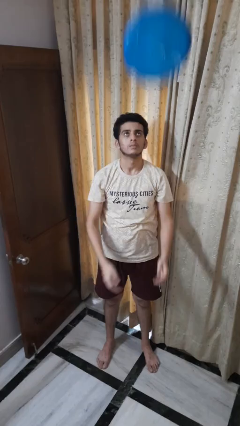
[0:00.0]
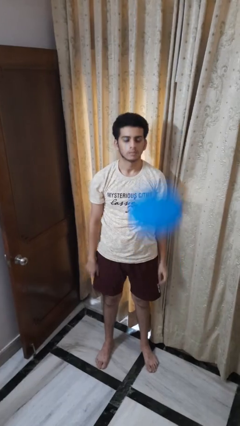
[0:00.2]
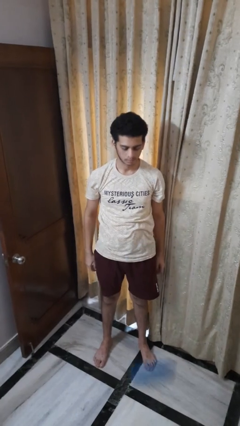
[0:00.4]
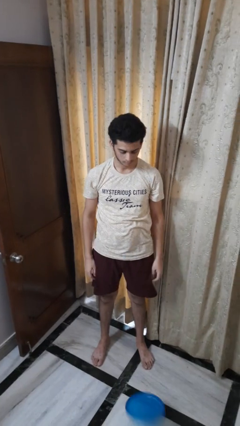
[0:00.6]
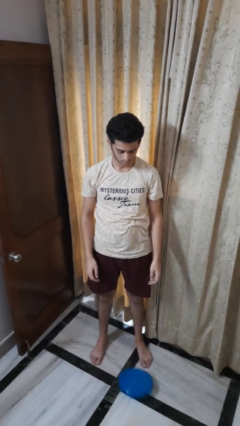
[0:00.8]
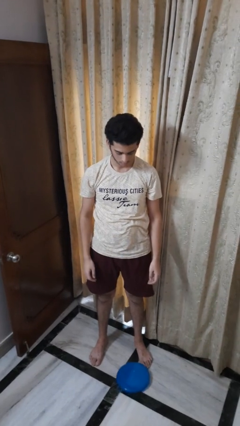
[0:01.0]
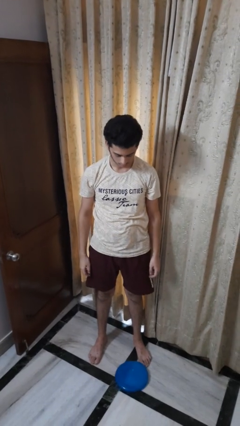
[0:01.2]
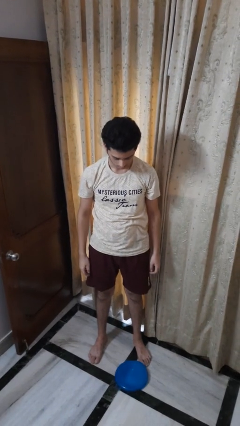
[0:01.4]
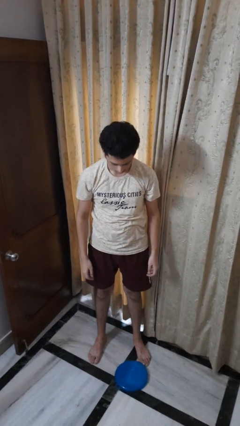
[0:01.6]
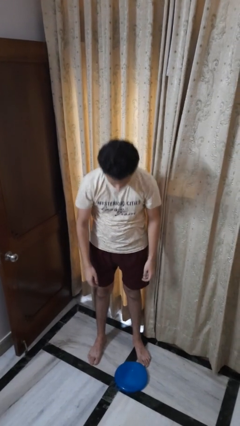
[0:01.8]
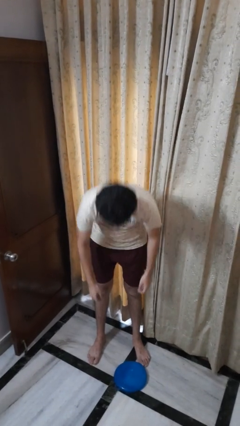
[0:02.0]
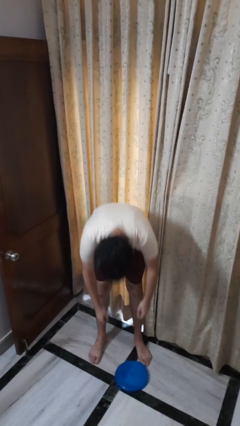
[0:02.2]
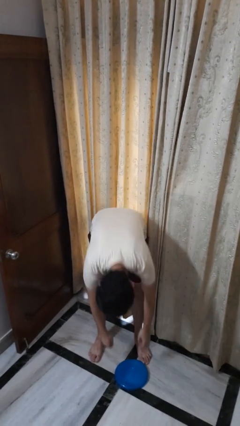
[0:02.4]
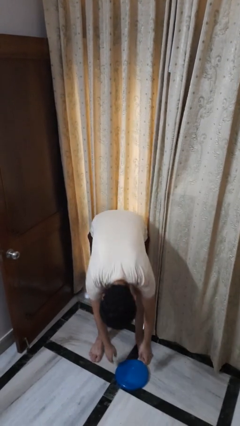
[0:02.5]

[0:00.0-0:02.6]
person throws object into air

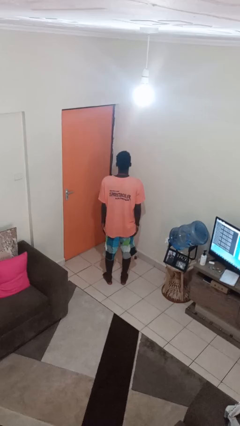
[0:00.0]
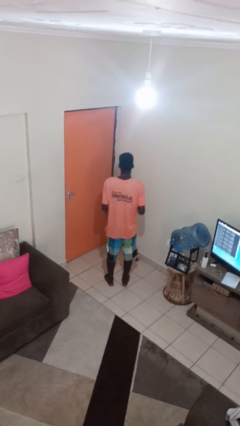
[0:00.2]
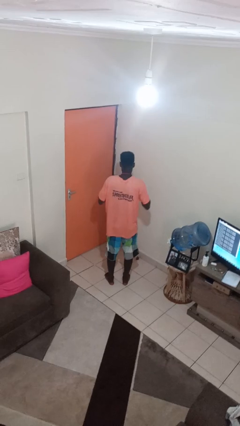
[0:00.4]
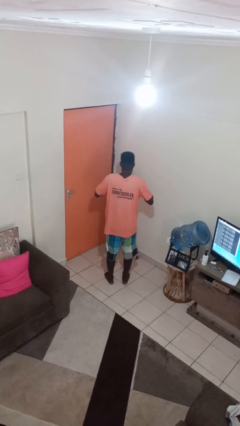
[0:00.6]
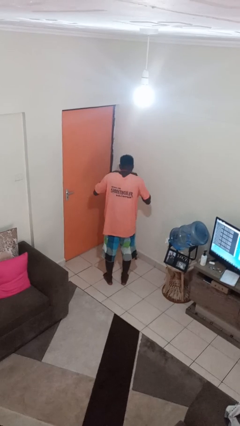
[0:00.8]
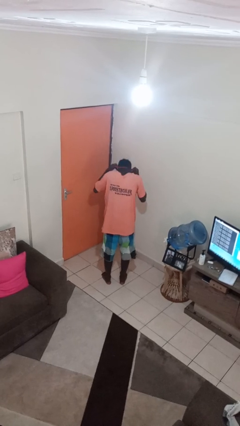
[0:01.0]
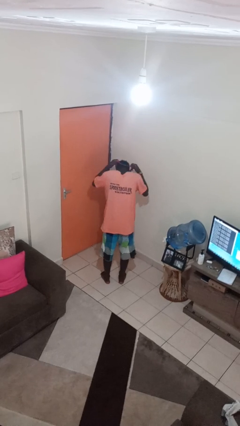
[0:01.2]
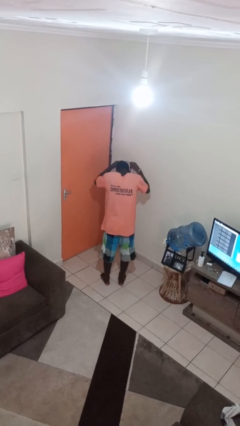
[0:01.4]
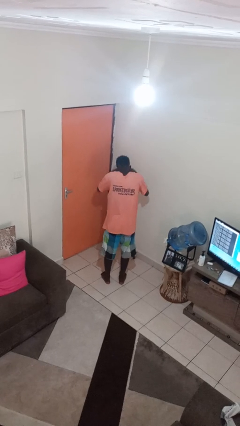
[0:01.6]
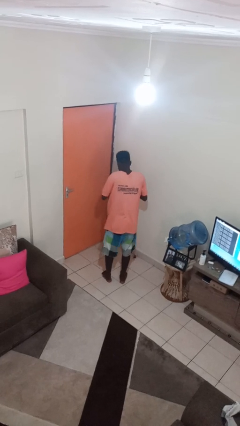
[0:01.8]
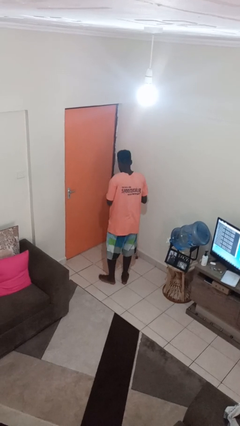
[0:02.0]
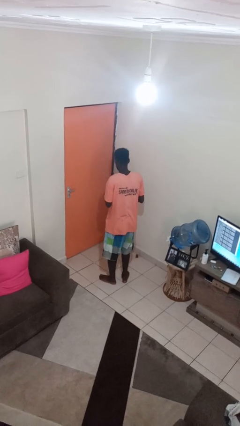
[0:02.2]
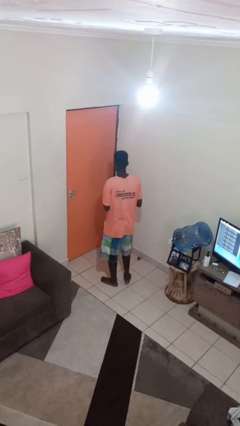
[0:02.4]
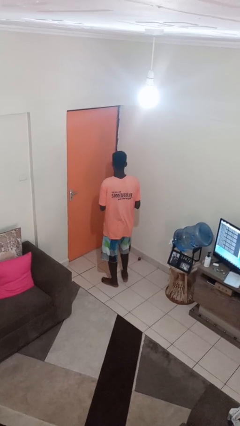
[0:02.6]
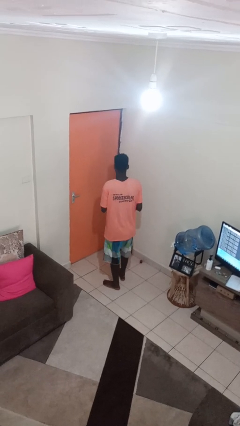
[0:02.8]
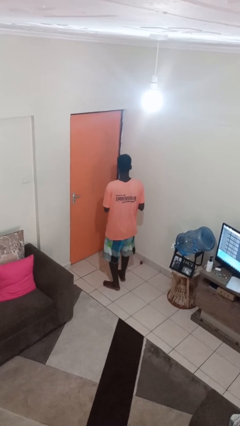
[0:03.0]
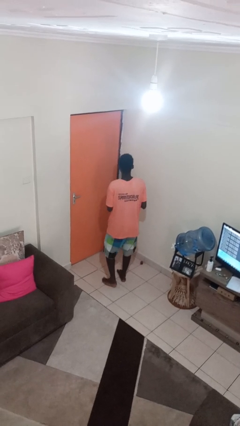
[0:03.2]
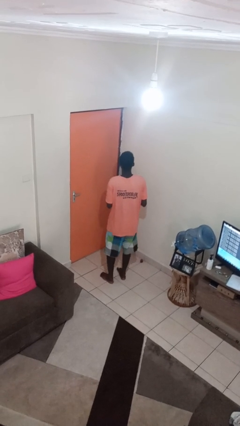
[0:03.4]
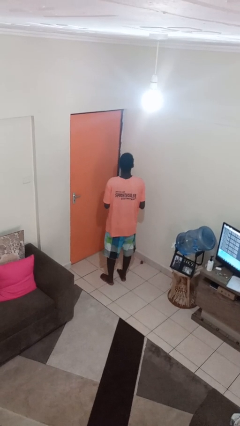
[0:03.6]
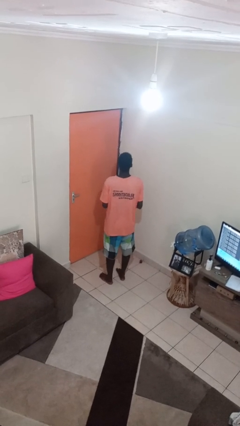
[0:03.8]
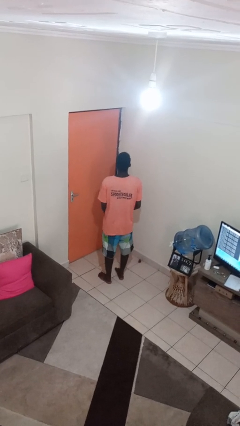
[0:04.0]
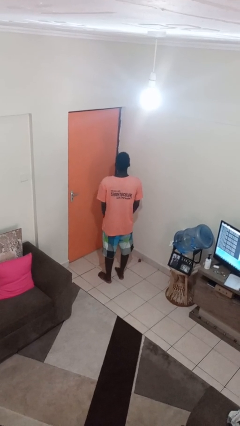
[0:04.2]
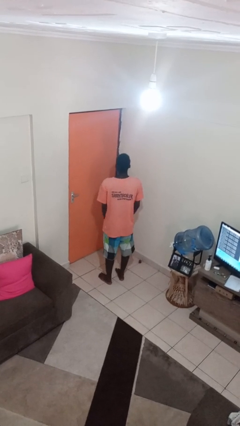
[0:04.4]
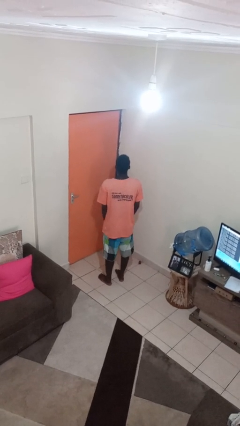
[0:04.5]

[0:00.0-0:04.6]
person takes off necklace

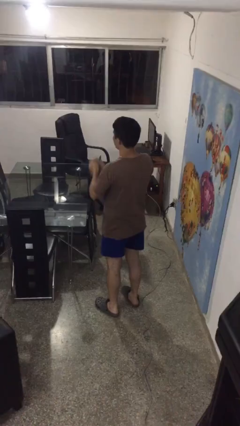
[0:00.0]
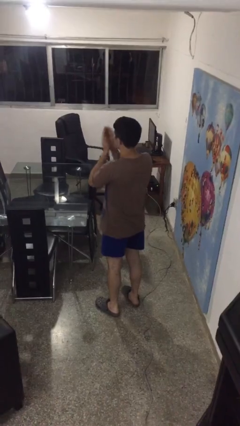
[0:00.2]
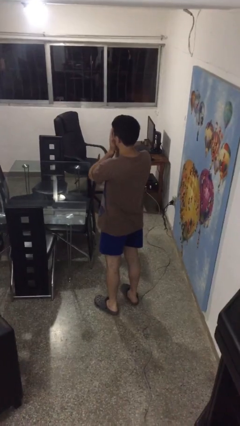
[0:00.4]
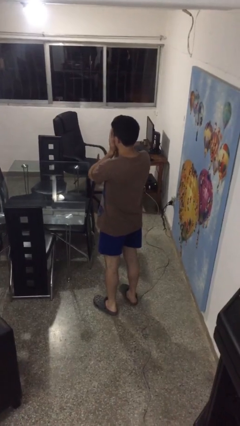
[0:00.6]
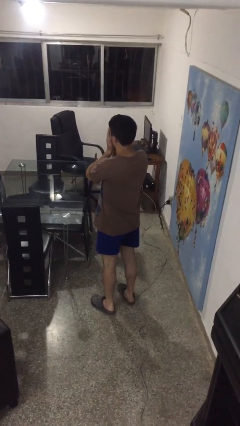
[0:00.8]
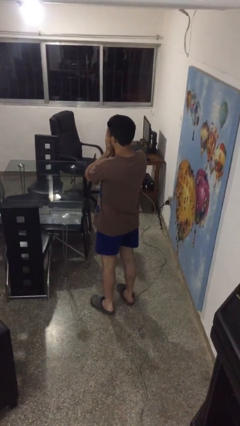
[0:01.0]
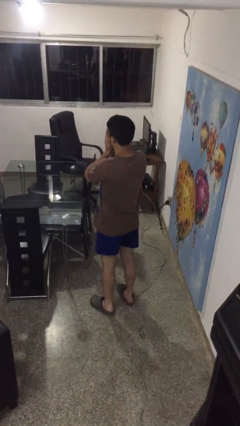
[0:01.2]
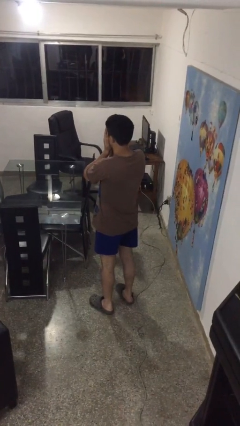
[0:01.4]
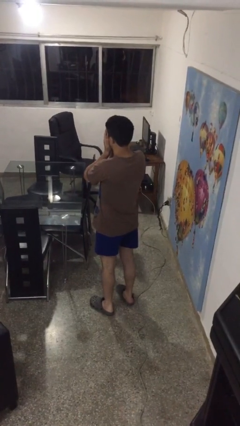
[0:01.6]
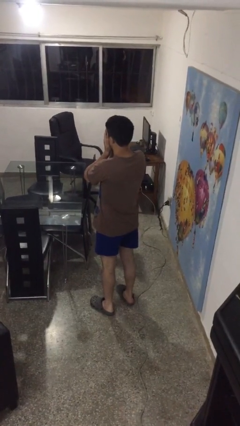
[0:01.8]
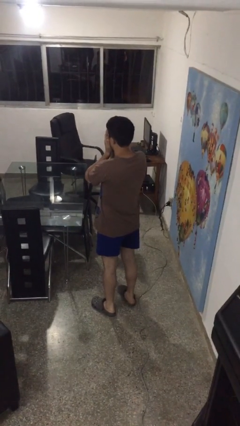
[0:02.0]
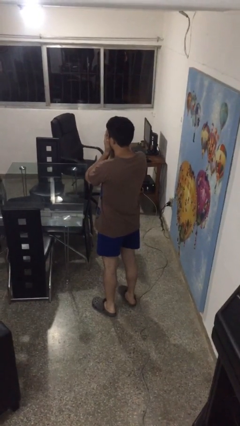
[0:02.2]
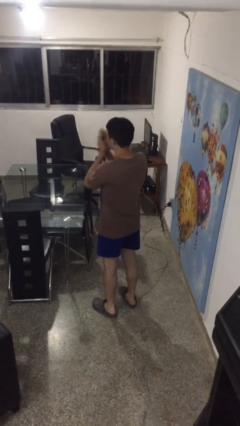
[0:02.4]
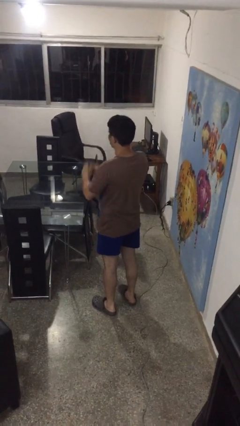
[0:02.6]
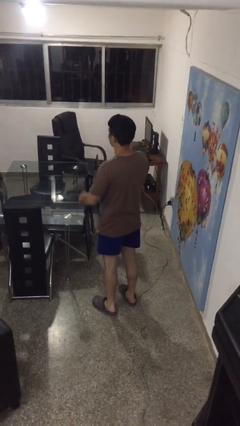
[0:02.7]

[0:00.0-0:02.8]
person covers face with hands

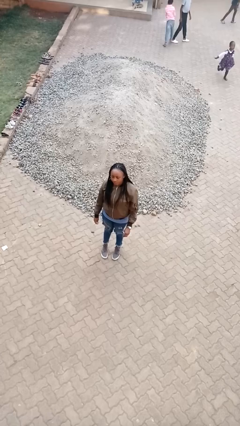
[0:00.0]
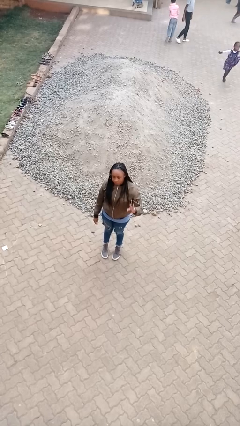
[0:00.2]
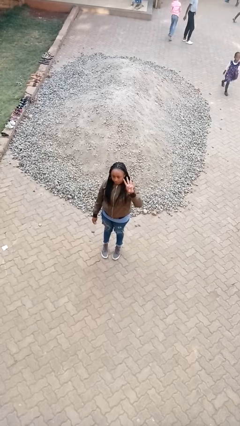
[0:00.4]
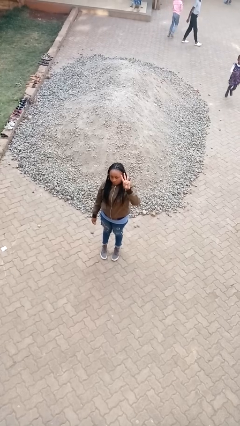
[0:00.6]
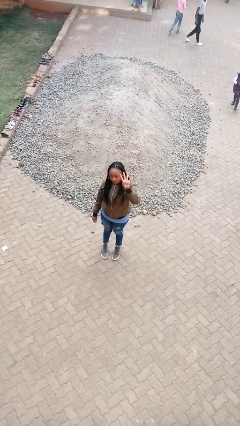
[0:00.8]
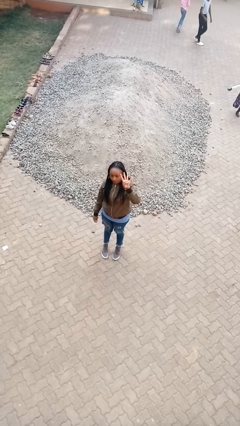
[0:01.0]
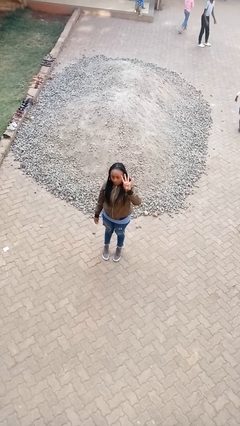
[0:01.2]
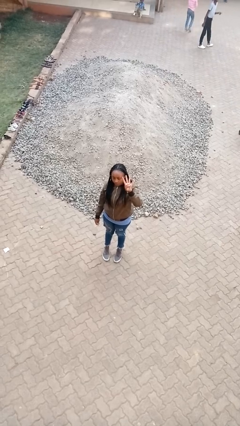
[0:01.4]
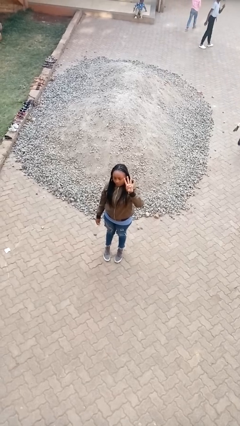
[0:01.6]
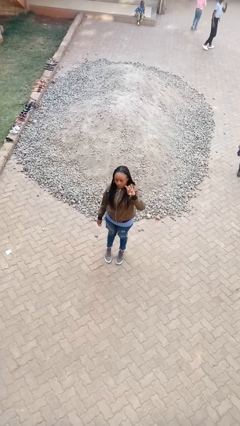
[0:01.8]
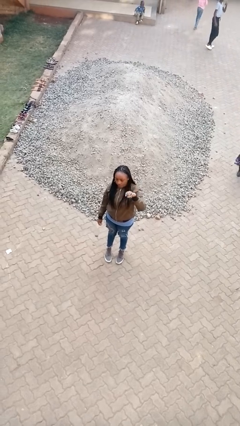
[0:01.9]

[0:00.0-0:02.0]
person gestures number four

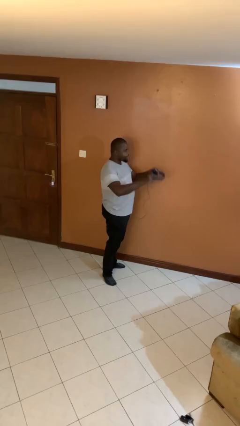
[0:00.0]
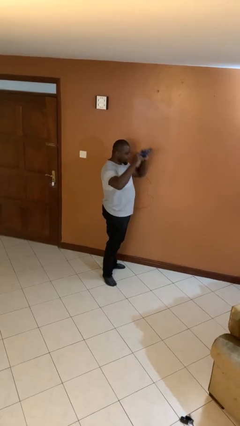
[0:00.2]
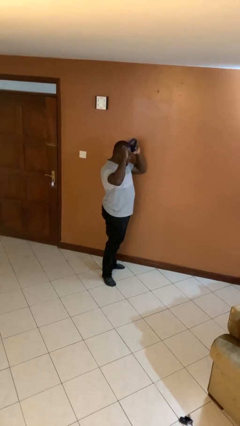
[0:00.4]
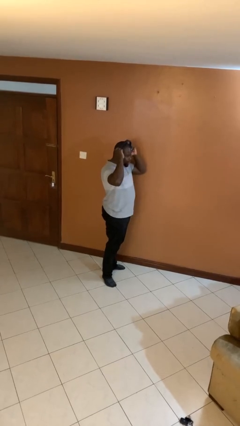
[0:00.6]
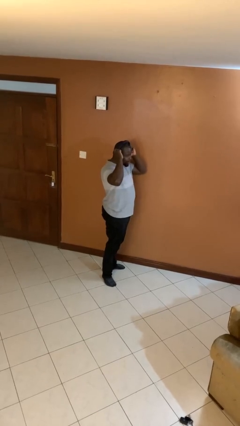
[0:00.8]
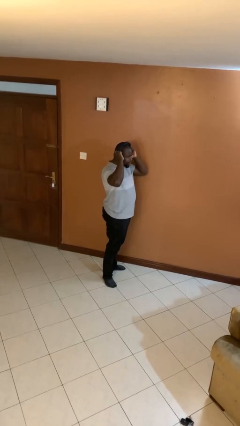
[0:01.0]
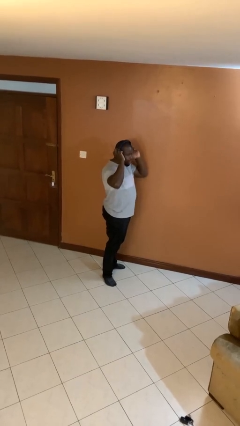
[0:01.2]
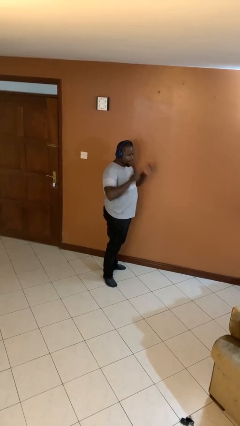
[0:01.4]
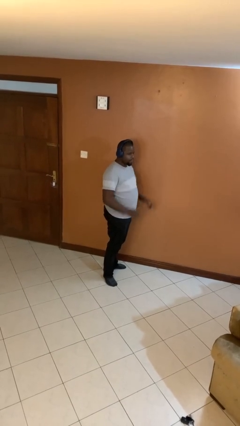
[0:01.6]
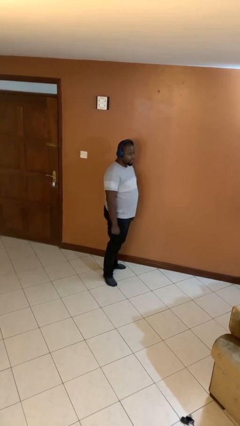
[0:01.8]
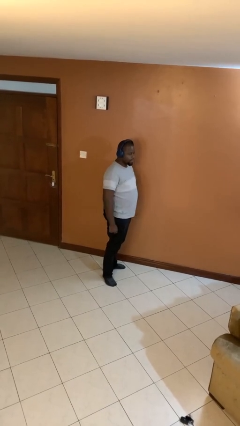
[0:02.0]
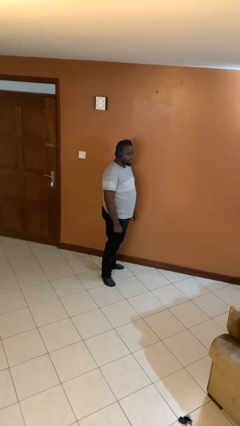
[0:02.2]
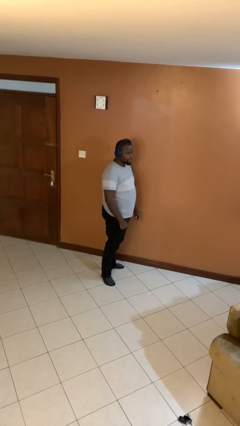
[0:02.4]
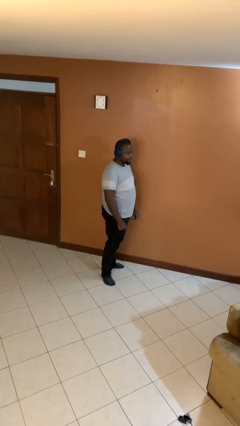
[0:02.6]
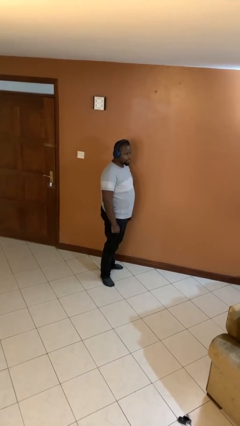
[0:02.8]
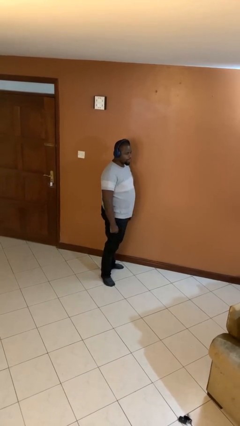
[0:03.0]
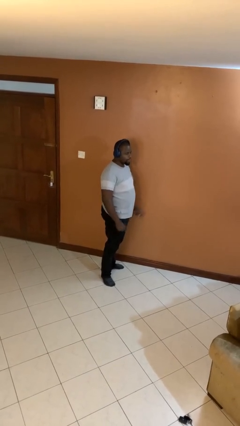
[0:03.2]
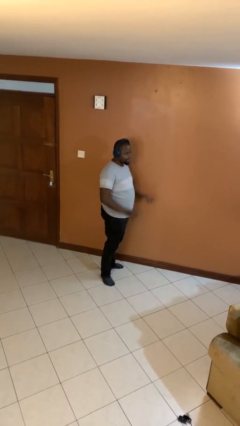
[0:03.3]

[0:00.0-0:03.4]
person puts on headphones

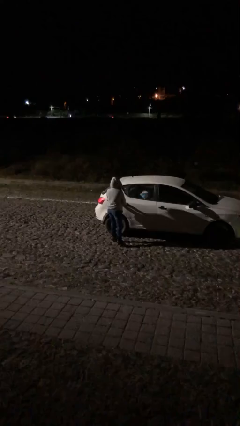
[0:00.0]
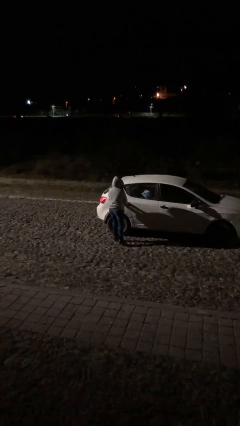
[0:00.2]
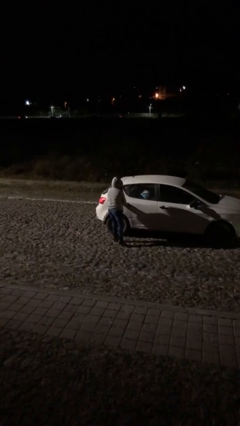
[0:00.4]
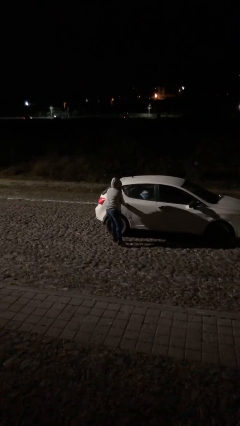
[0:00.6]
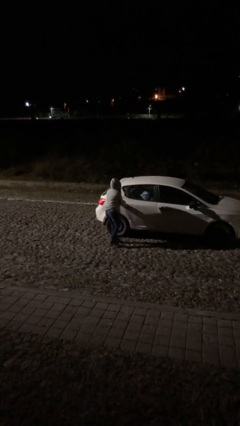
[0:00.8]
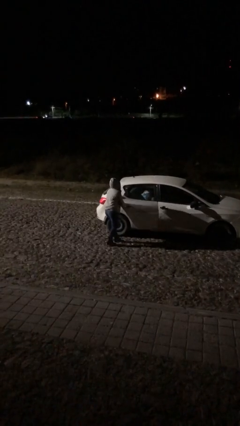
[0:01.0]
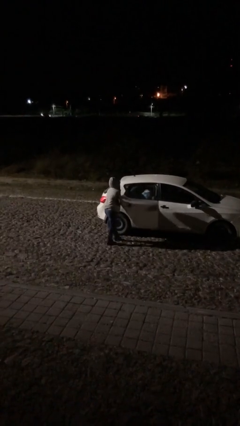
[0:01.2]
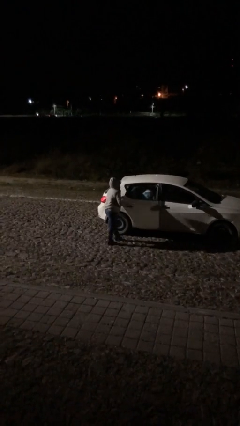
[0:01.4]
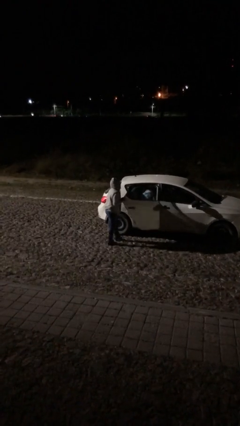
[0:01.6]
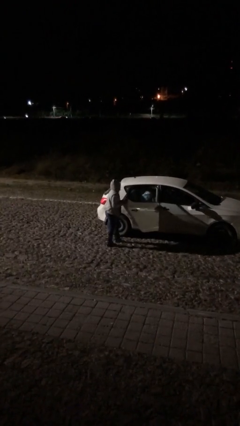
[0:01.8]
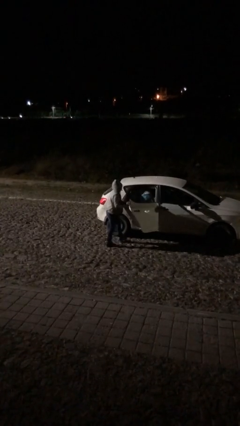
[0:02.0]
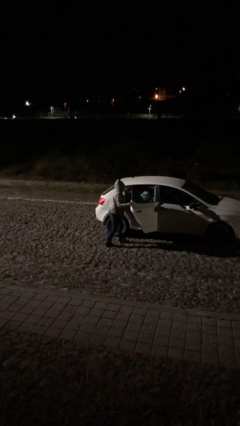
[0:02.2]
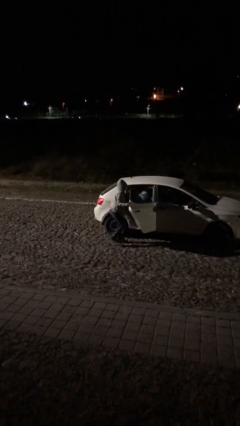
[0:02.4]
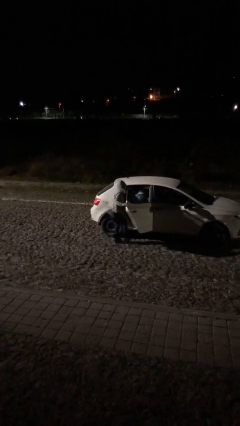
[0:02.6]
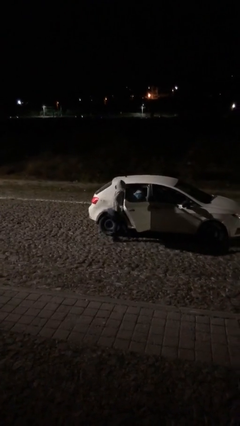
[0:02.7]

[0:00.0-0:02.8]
person opens car door
